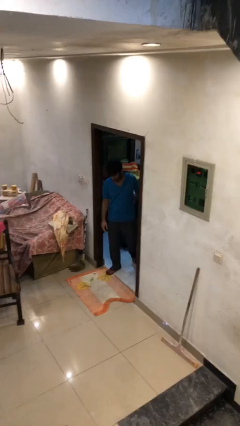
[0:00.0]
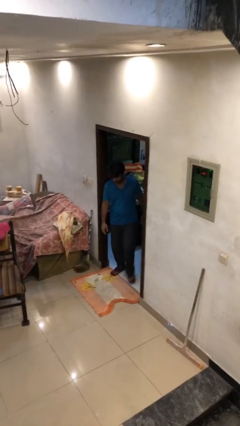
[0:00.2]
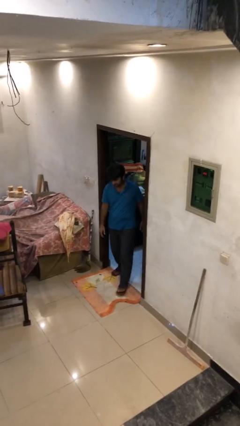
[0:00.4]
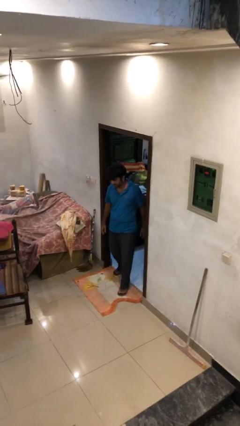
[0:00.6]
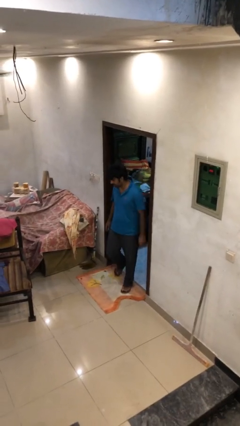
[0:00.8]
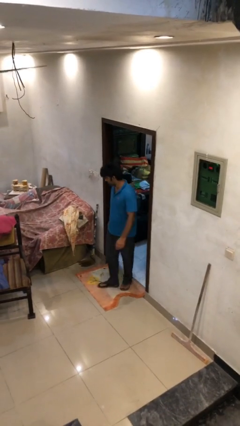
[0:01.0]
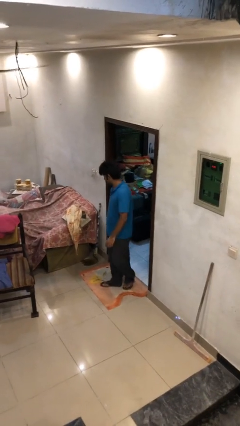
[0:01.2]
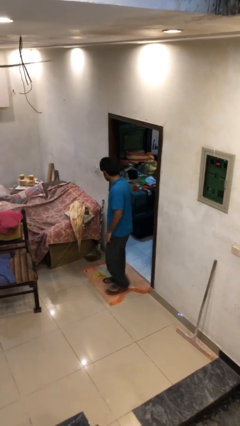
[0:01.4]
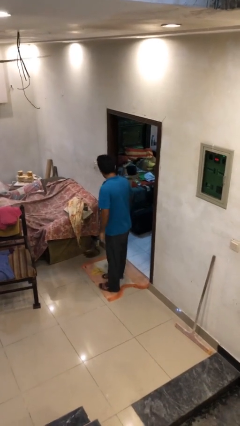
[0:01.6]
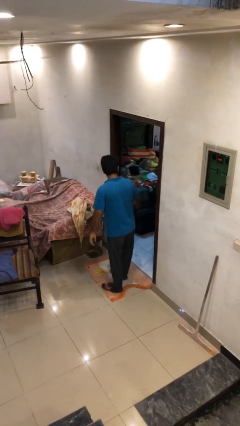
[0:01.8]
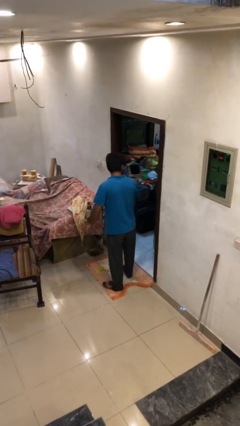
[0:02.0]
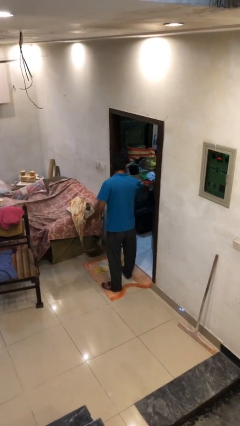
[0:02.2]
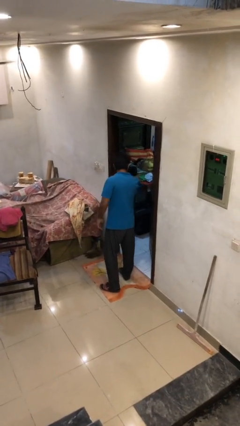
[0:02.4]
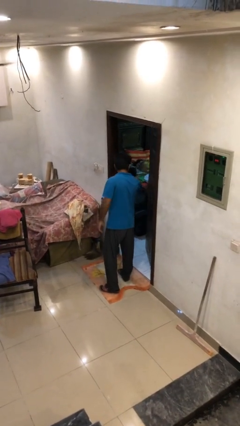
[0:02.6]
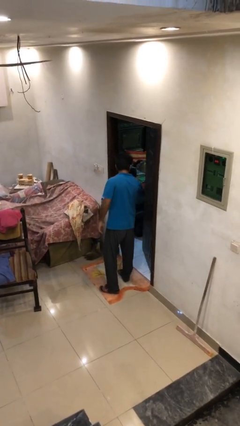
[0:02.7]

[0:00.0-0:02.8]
person enters scene through structure

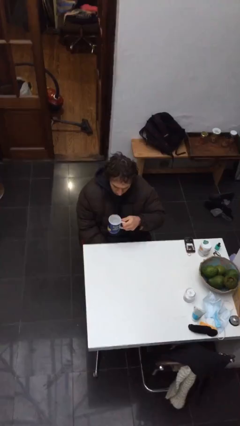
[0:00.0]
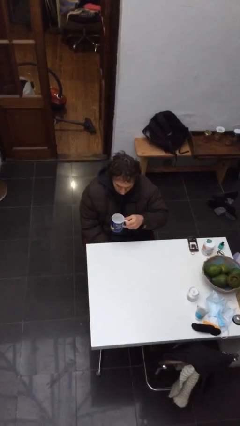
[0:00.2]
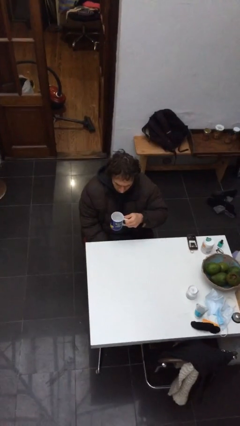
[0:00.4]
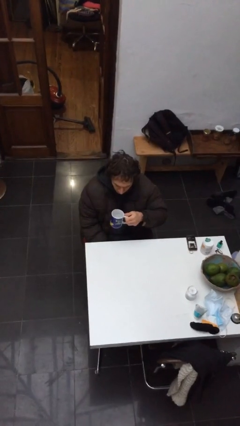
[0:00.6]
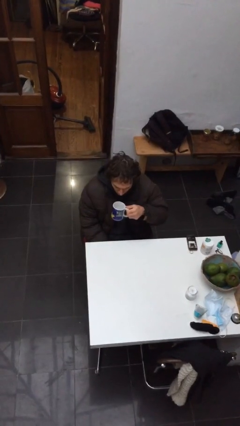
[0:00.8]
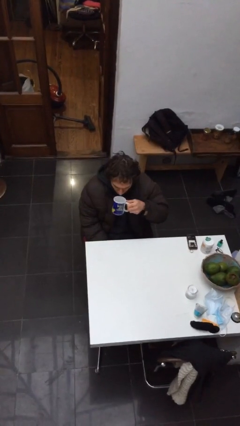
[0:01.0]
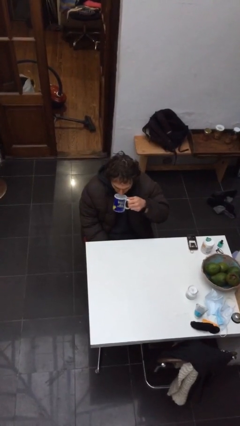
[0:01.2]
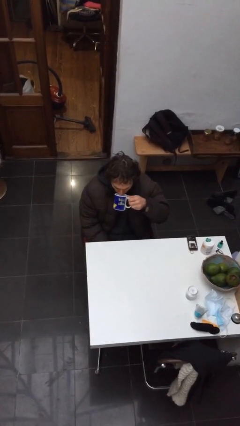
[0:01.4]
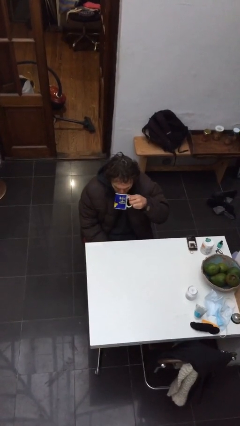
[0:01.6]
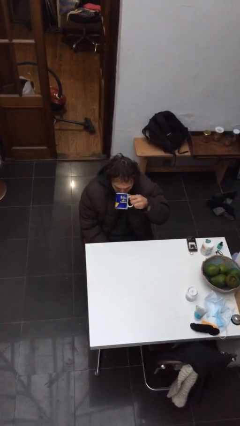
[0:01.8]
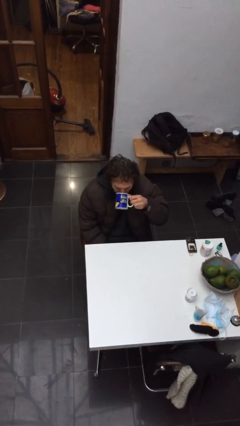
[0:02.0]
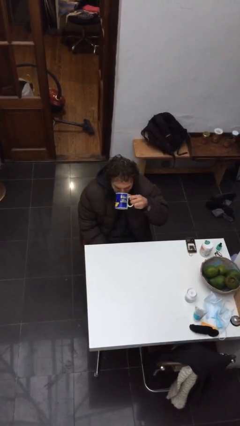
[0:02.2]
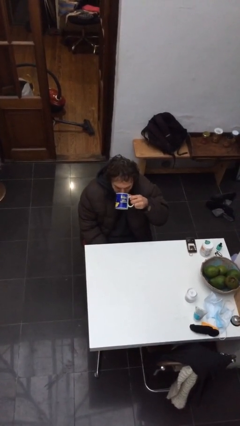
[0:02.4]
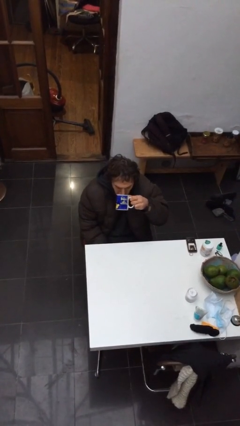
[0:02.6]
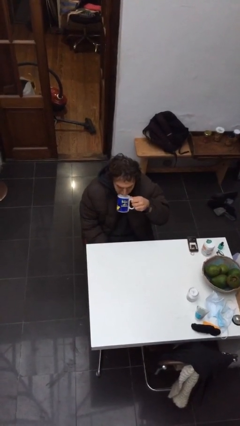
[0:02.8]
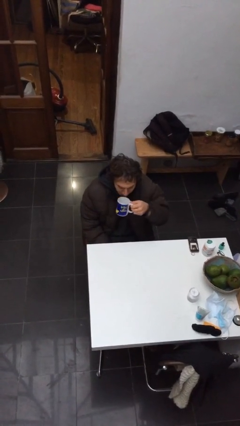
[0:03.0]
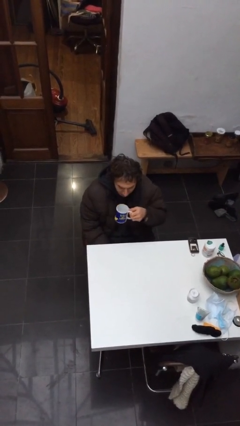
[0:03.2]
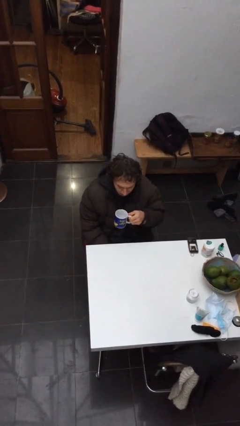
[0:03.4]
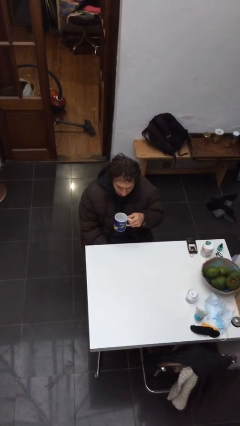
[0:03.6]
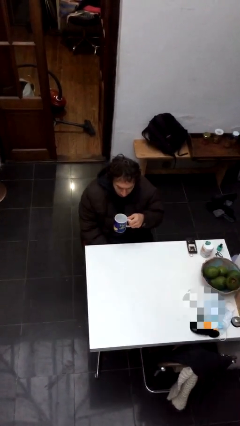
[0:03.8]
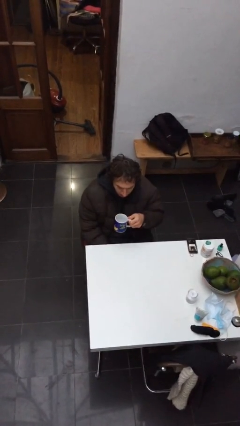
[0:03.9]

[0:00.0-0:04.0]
person drinks from mug

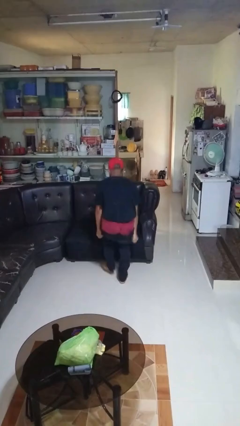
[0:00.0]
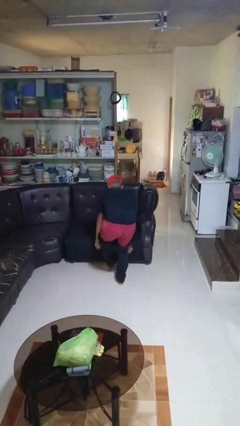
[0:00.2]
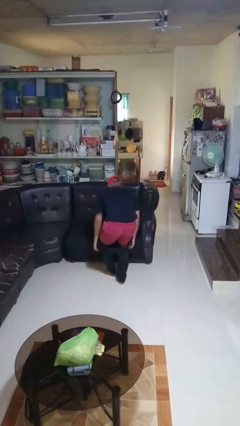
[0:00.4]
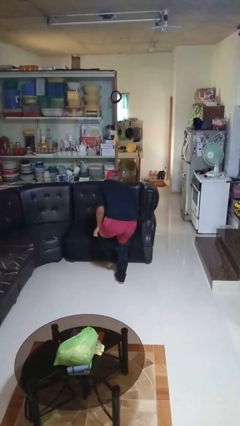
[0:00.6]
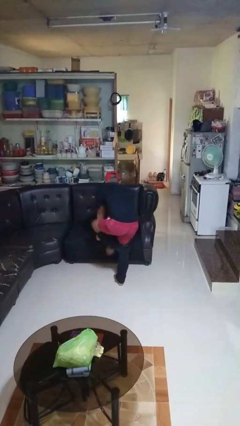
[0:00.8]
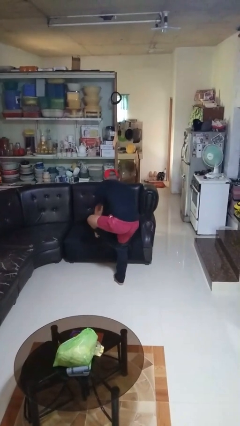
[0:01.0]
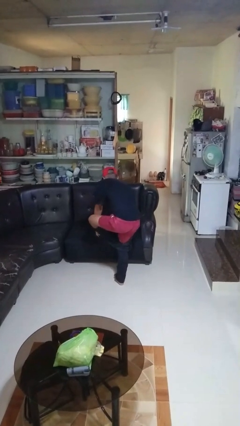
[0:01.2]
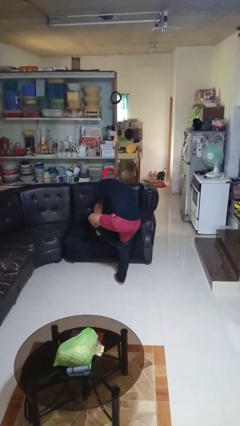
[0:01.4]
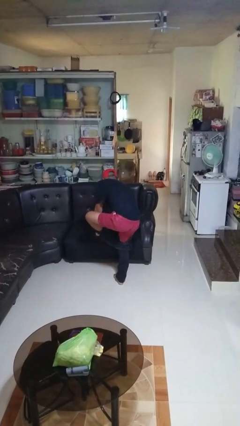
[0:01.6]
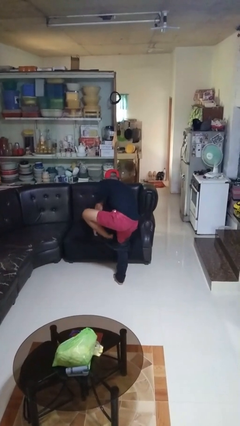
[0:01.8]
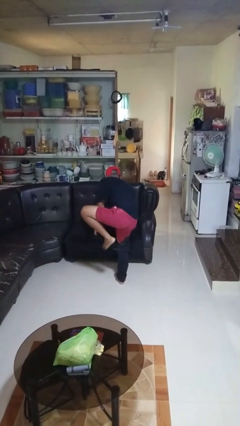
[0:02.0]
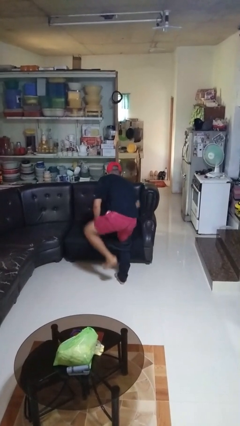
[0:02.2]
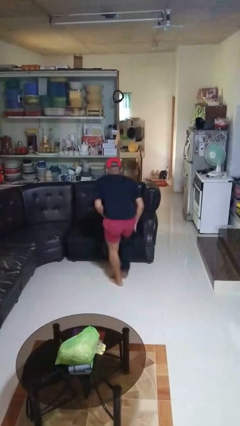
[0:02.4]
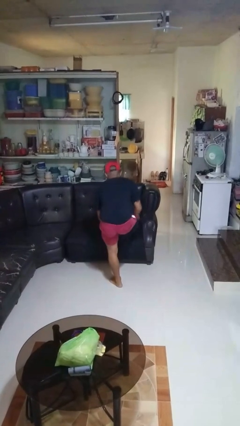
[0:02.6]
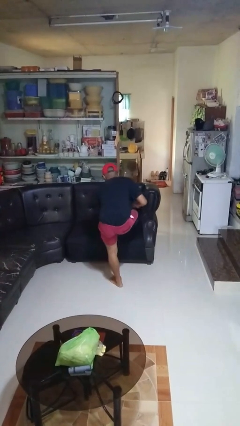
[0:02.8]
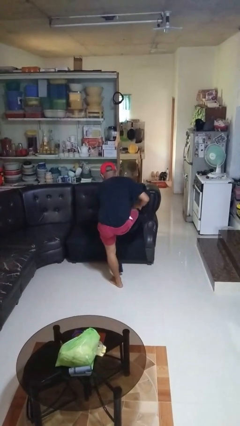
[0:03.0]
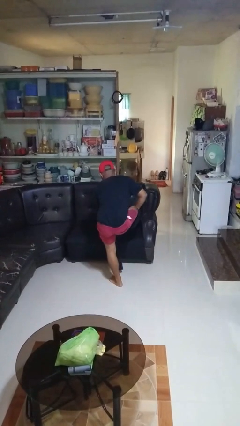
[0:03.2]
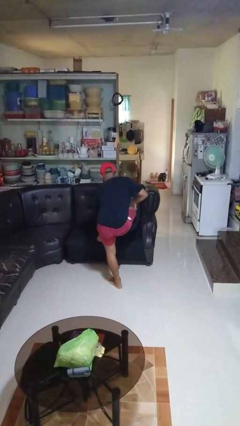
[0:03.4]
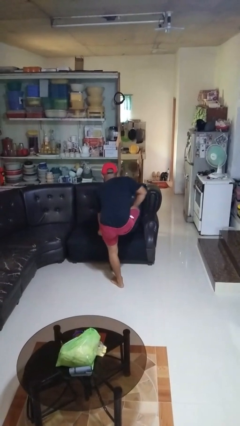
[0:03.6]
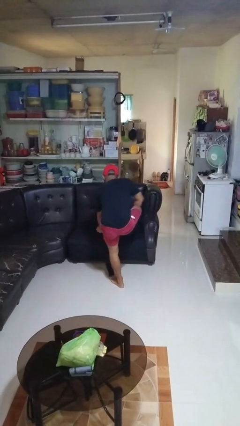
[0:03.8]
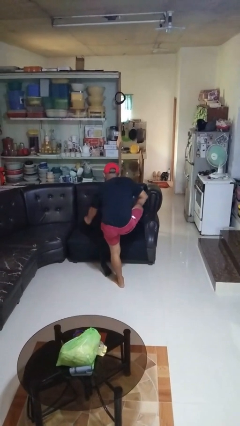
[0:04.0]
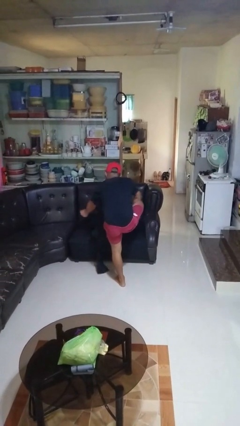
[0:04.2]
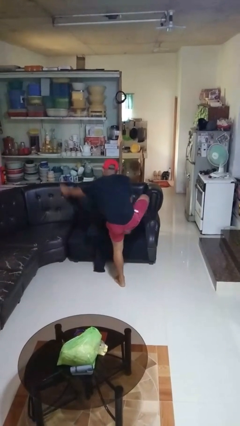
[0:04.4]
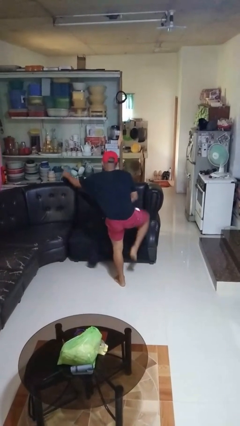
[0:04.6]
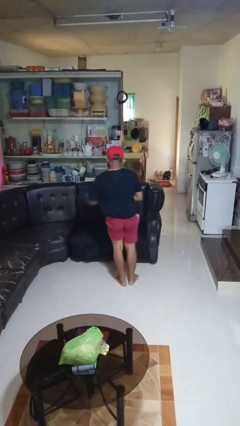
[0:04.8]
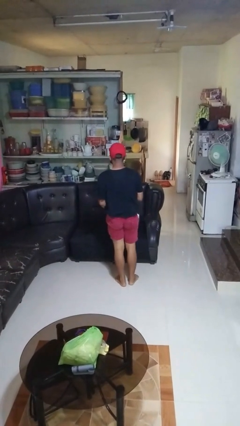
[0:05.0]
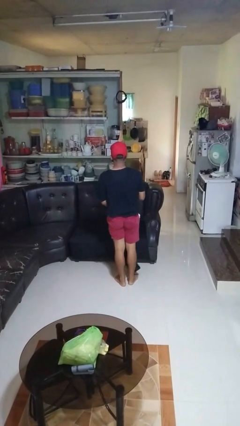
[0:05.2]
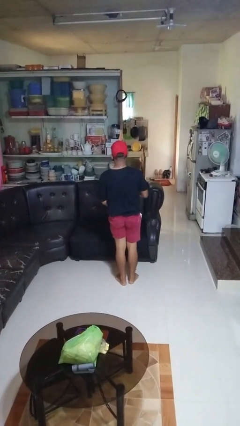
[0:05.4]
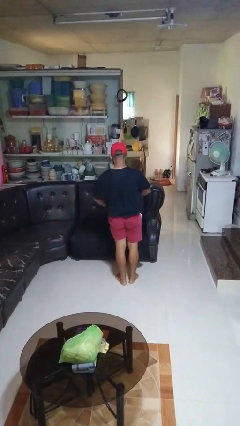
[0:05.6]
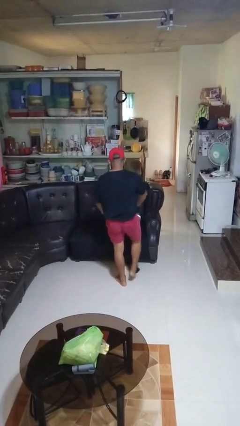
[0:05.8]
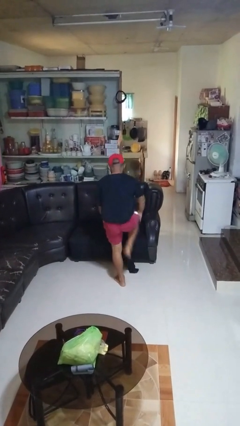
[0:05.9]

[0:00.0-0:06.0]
person takes off pants

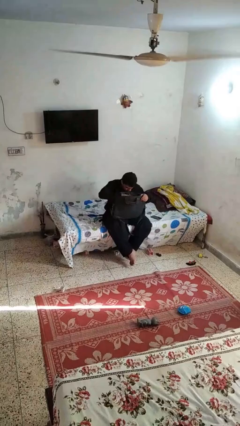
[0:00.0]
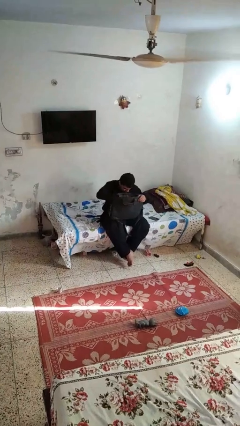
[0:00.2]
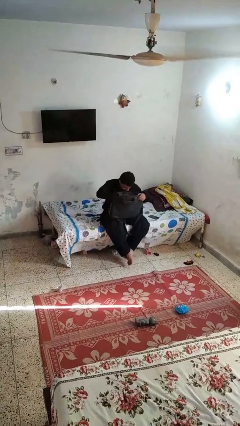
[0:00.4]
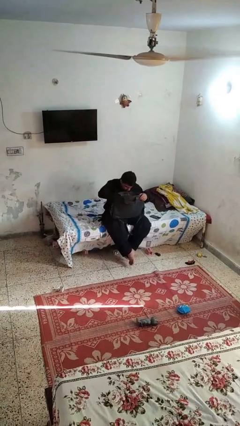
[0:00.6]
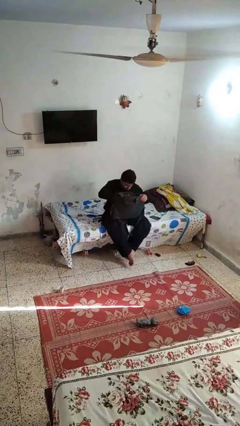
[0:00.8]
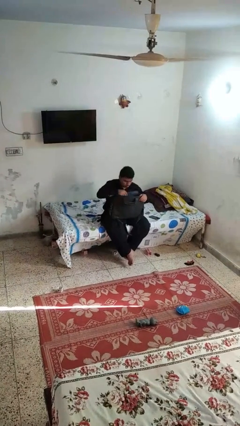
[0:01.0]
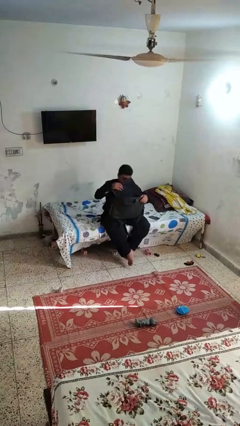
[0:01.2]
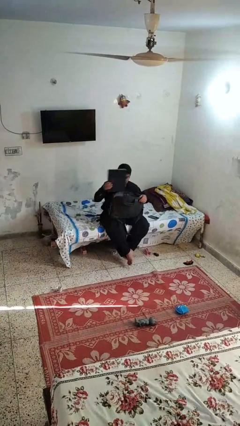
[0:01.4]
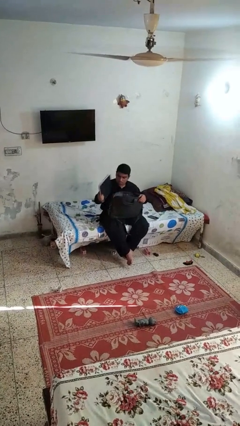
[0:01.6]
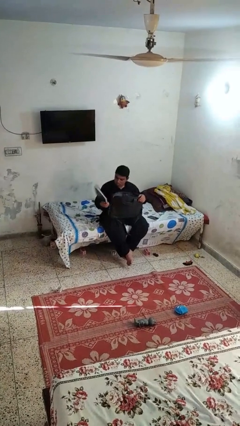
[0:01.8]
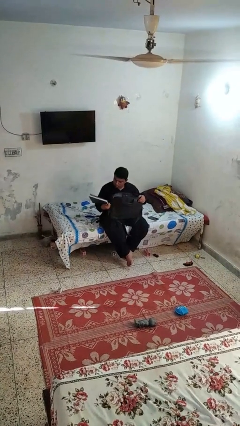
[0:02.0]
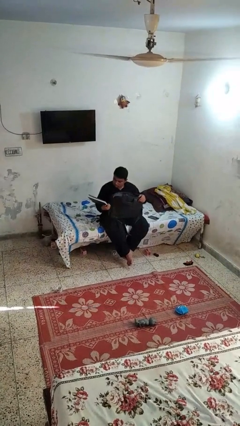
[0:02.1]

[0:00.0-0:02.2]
person takes object from backpack

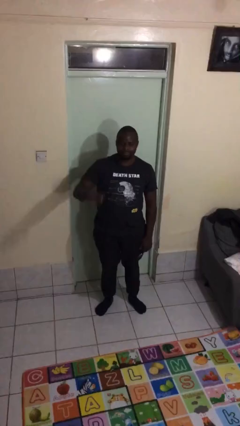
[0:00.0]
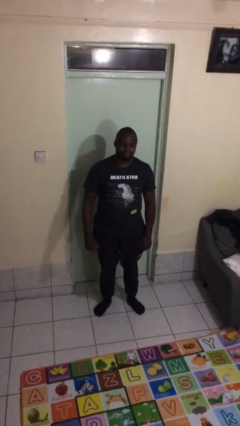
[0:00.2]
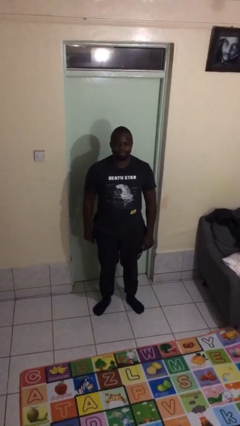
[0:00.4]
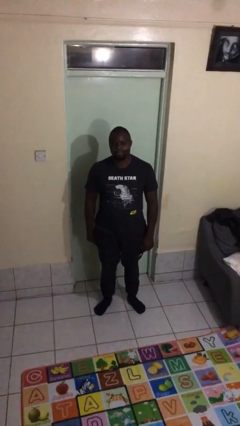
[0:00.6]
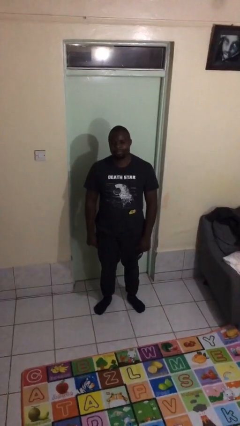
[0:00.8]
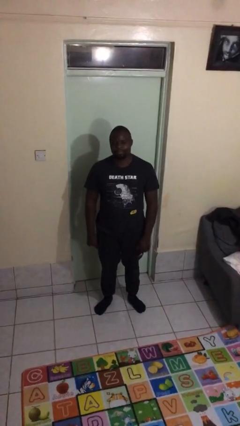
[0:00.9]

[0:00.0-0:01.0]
person gestures lower hand

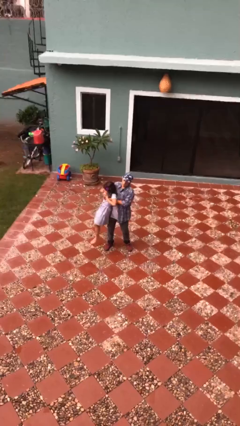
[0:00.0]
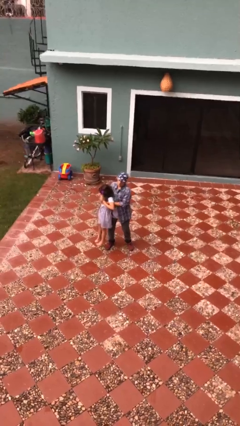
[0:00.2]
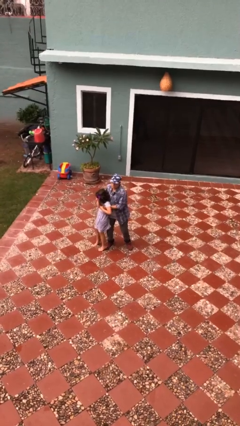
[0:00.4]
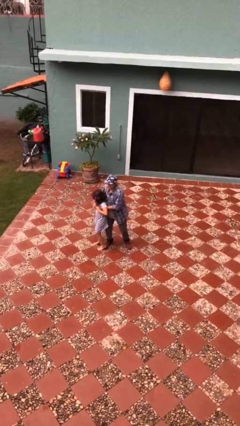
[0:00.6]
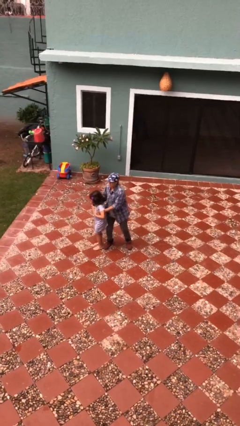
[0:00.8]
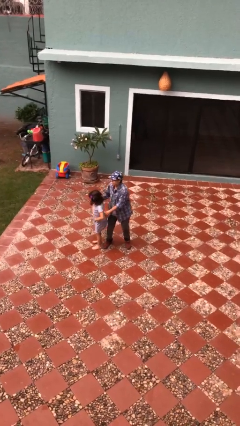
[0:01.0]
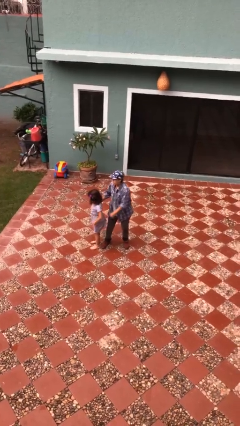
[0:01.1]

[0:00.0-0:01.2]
person puts down person

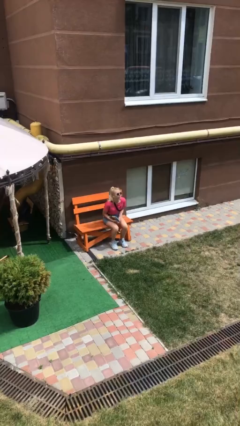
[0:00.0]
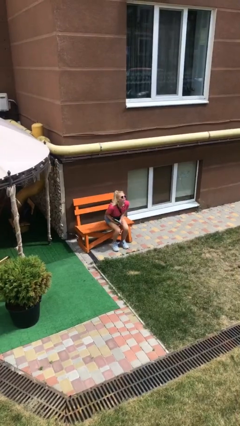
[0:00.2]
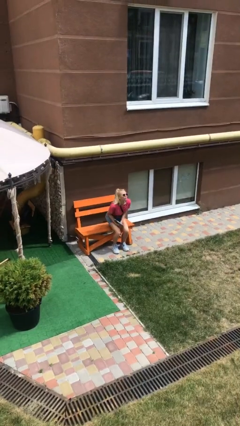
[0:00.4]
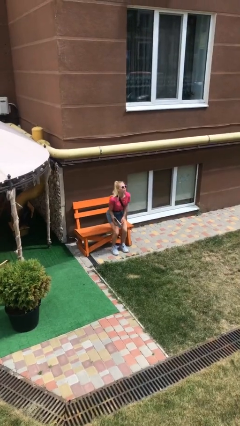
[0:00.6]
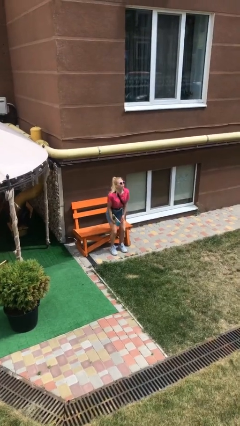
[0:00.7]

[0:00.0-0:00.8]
person stands up
